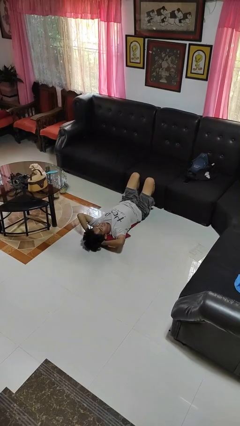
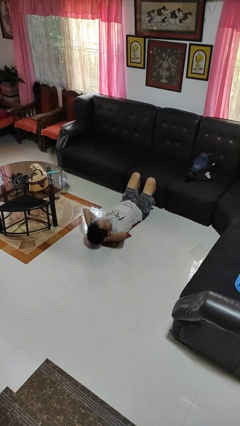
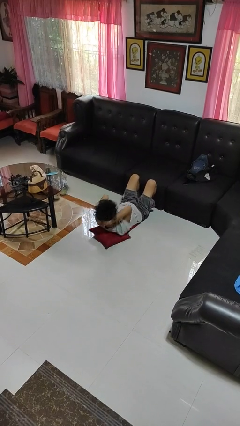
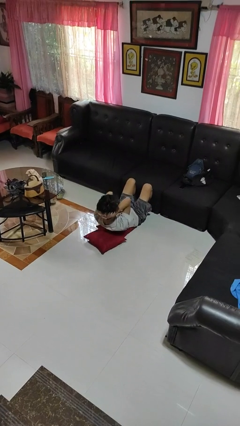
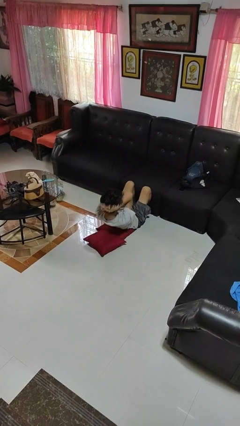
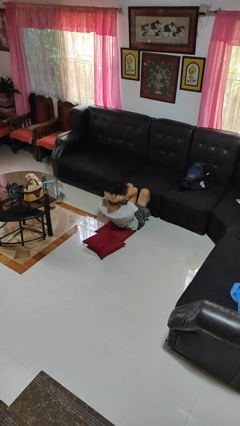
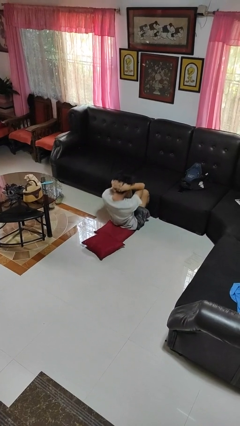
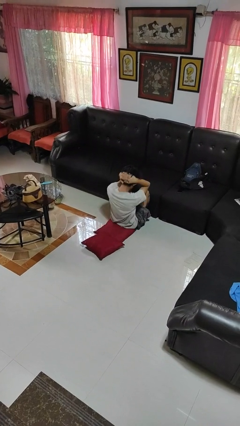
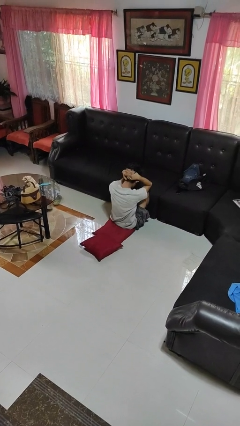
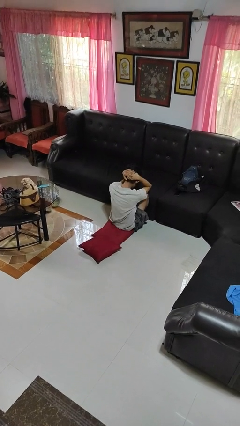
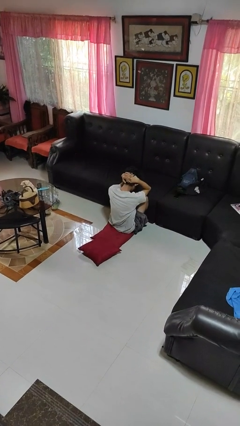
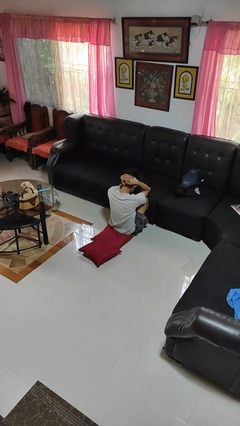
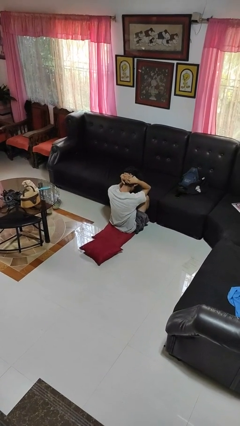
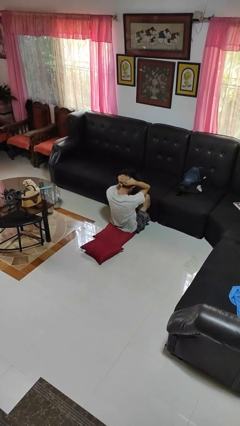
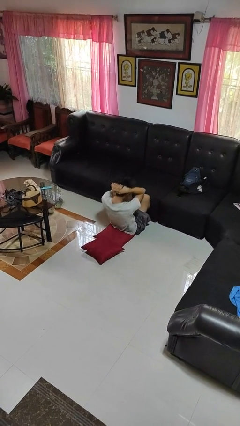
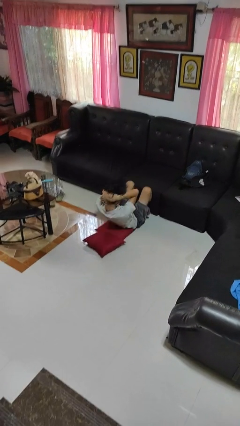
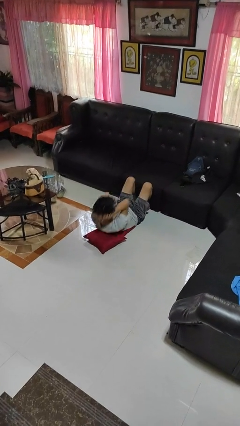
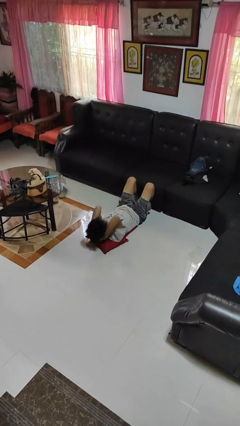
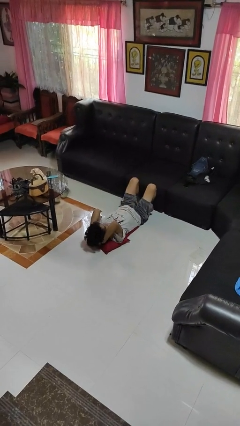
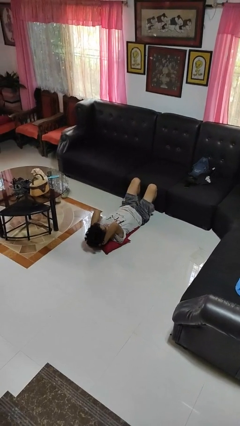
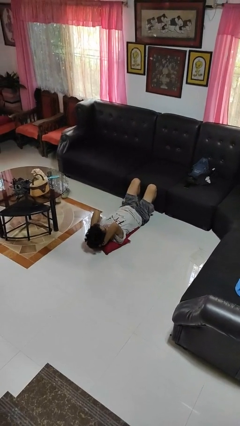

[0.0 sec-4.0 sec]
person exercises with situp

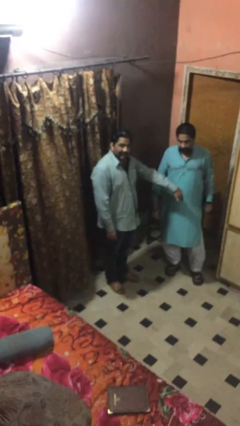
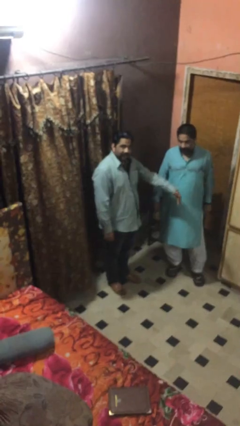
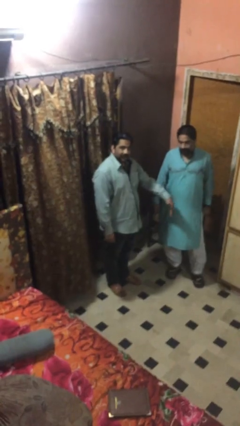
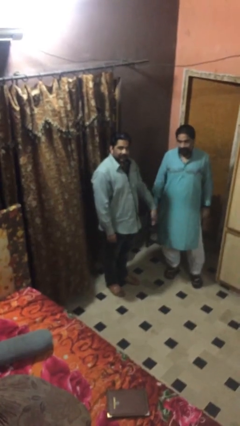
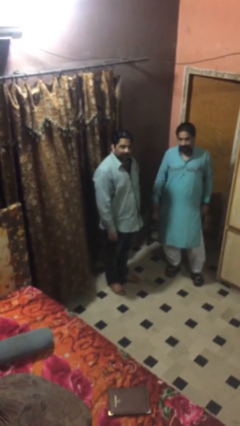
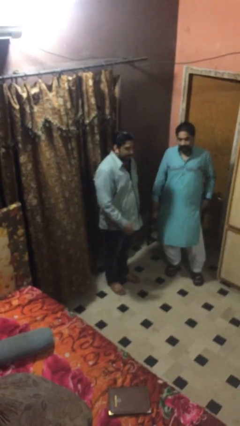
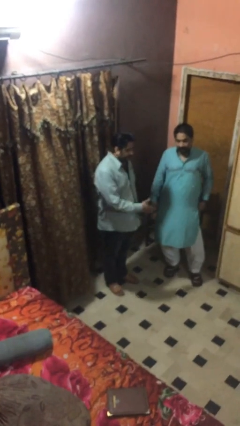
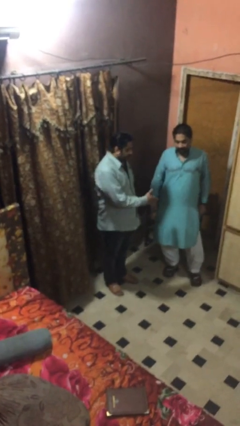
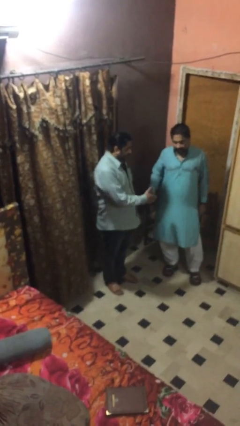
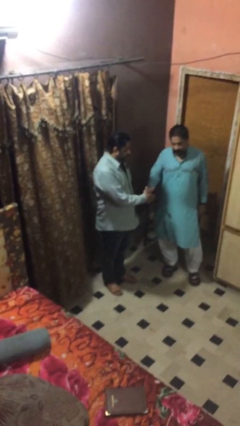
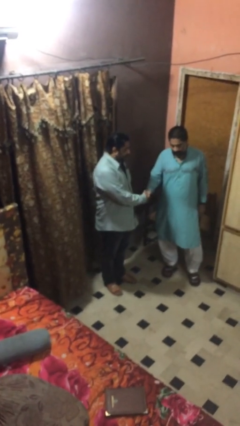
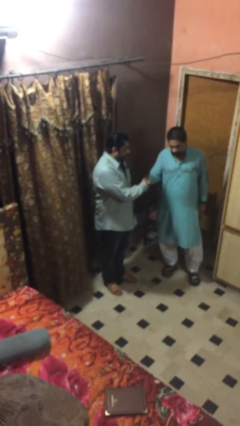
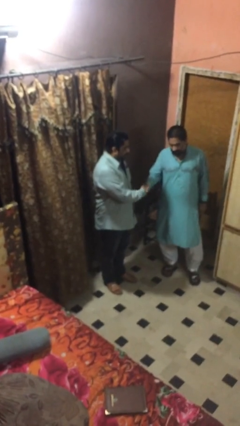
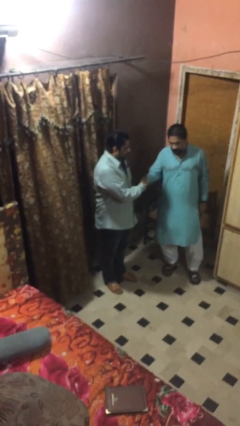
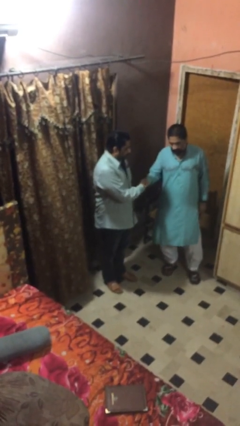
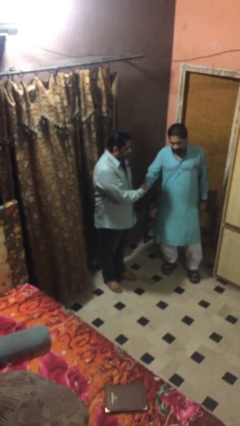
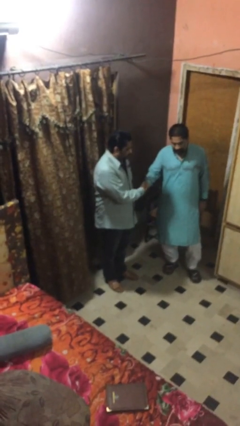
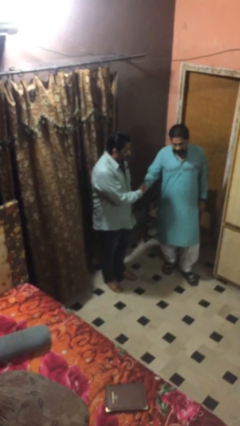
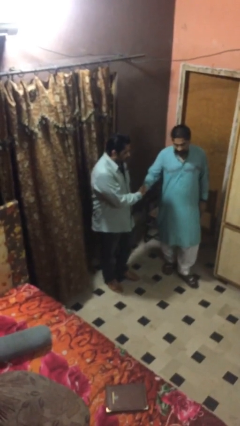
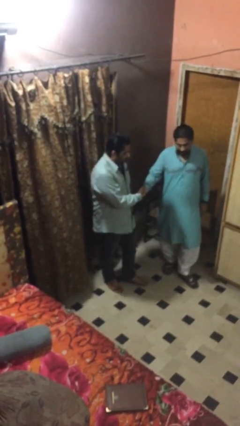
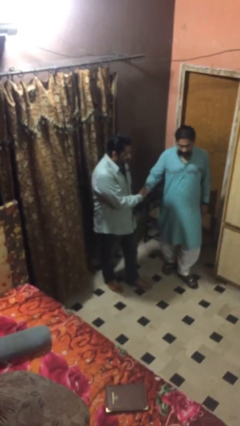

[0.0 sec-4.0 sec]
person shakes hand

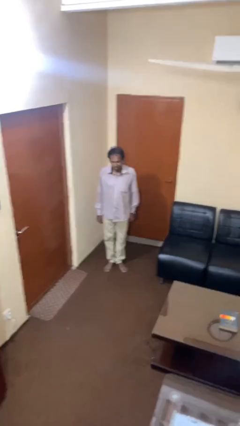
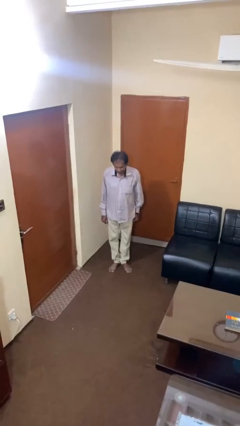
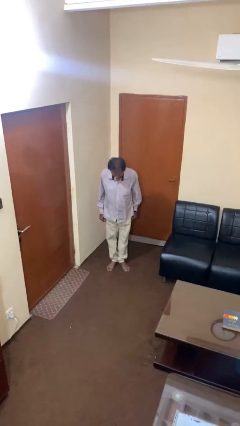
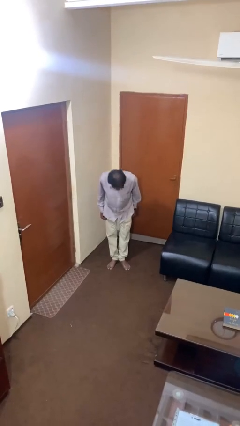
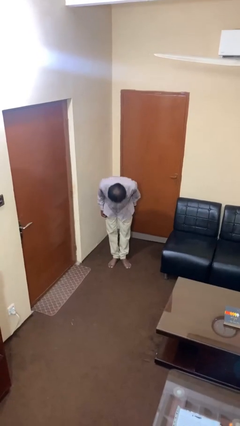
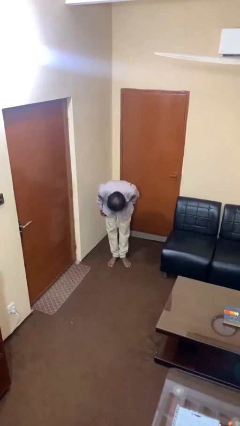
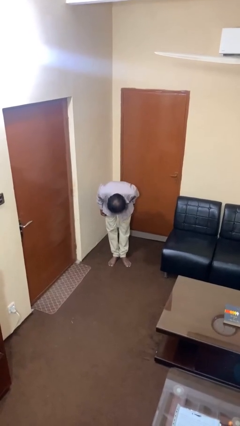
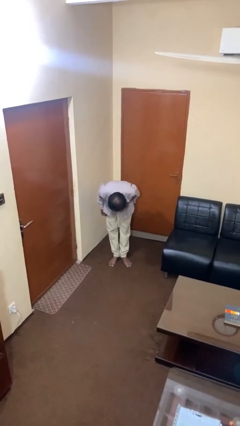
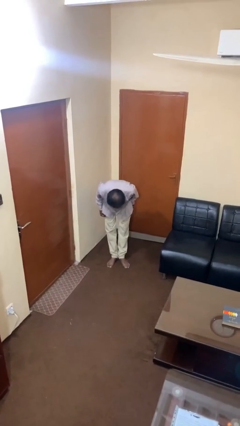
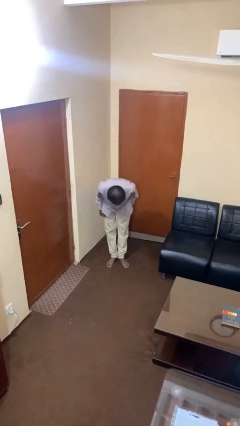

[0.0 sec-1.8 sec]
person bows

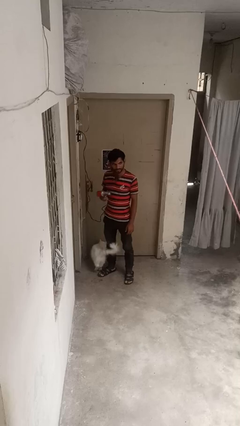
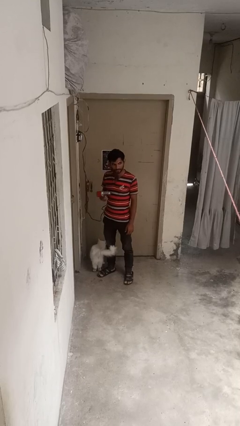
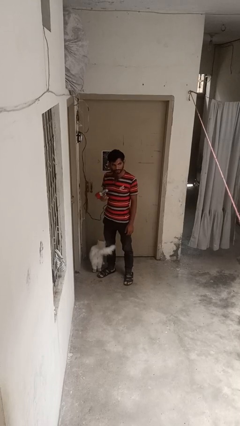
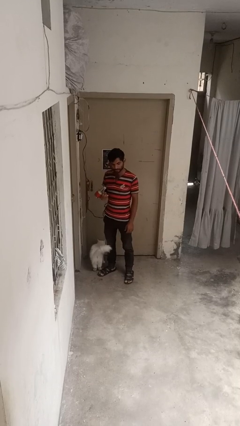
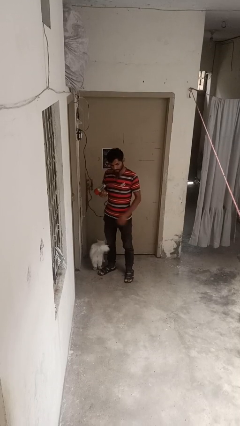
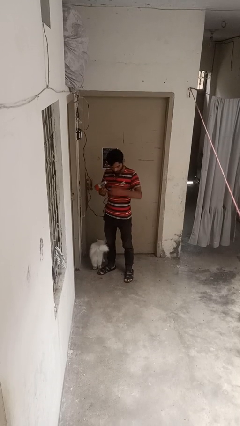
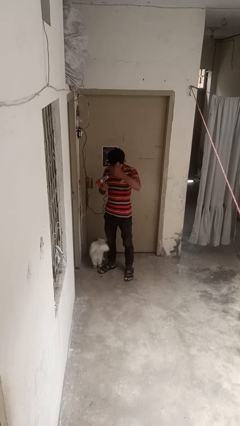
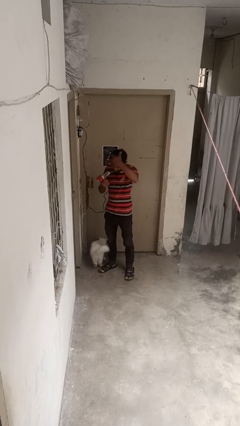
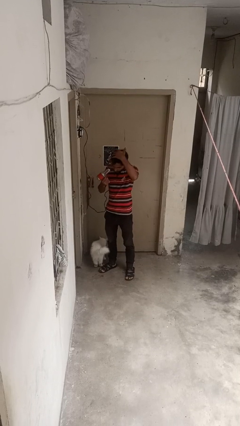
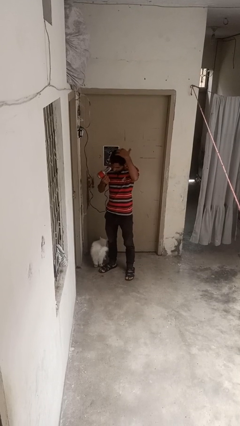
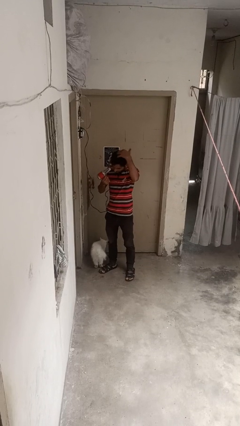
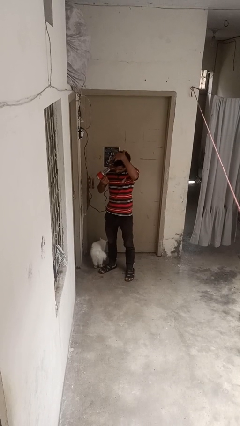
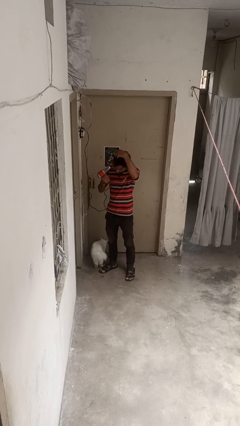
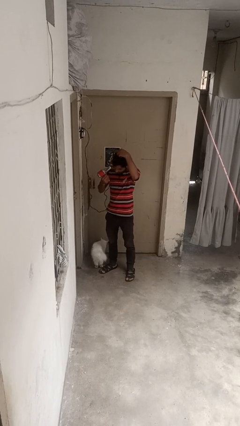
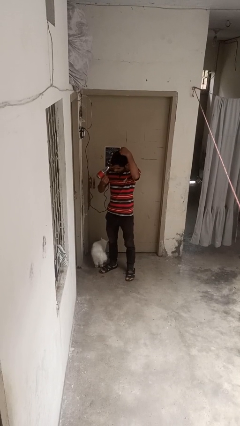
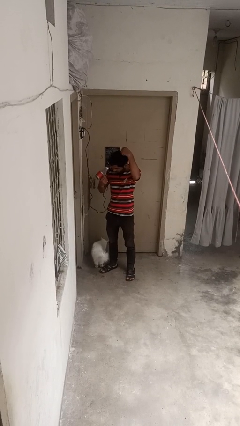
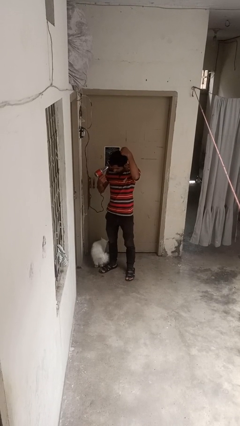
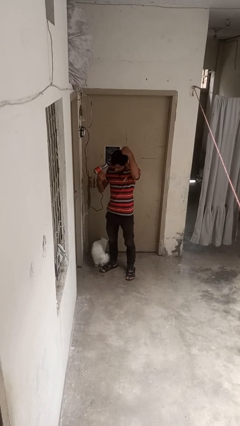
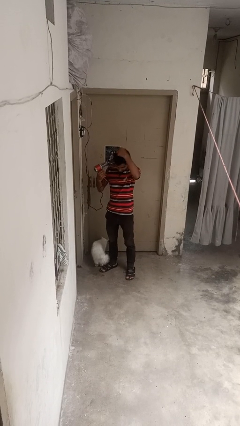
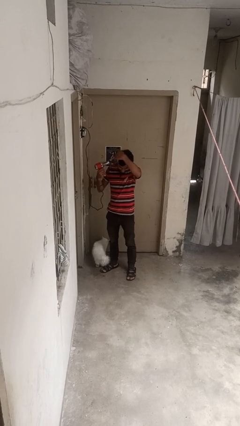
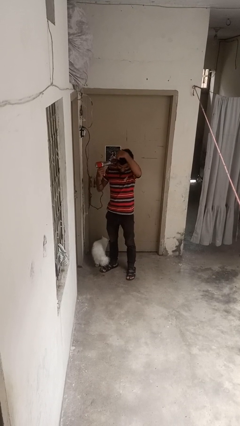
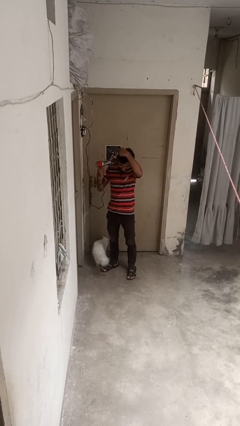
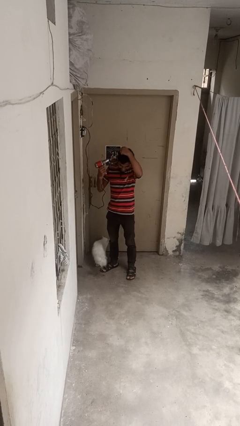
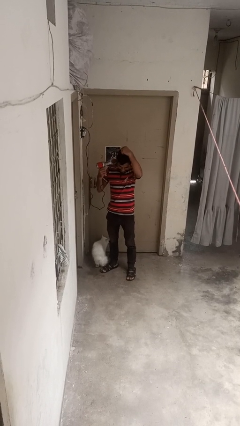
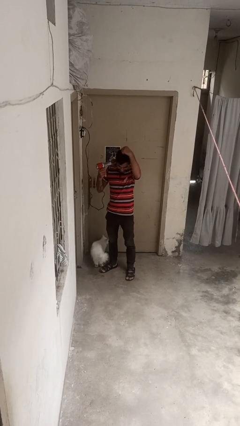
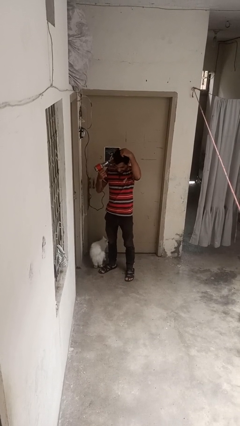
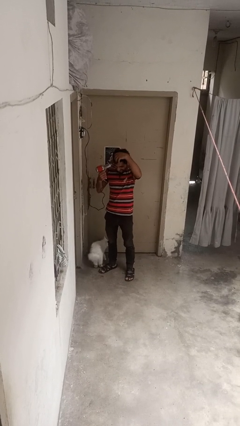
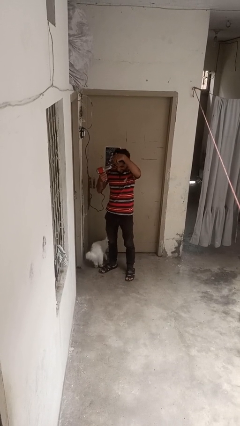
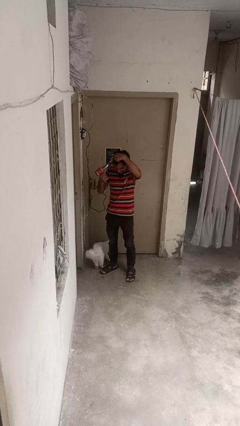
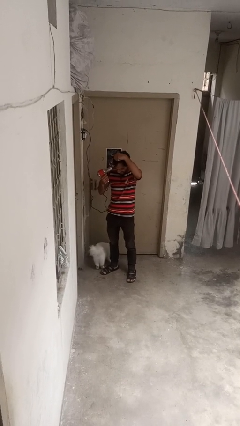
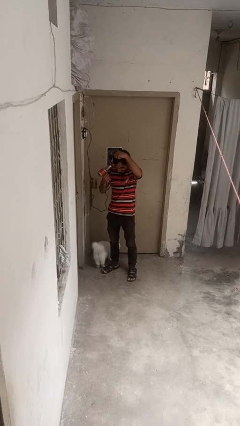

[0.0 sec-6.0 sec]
person dries hair with hairdryer

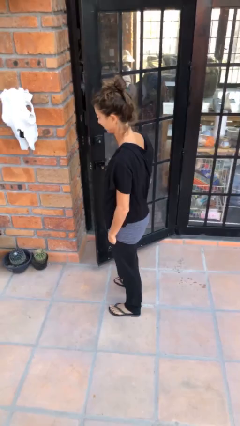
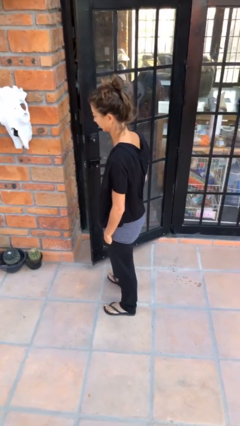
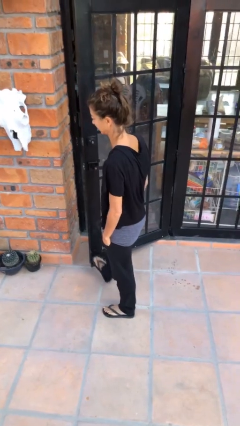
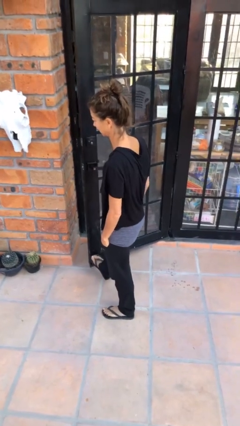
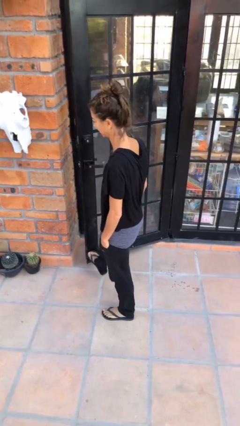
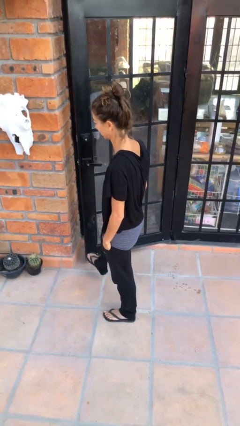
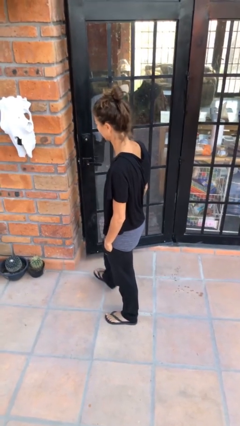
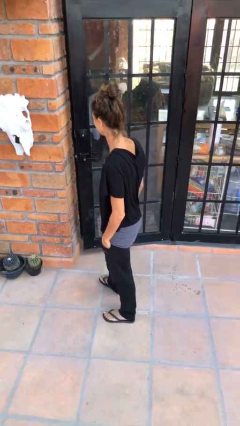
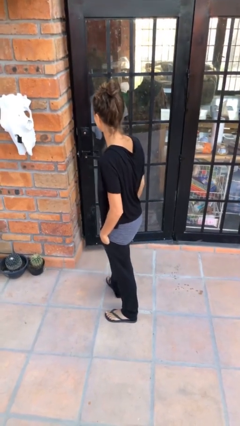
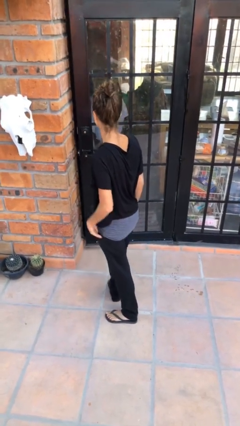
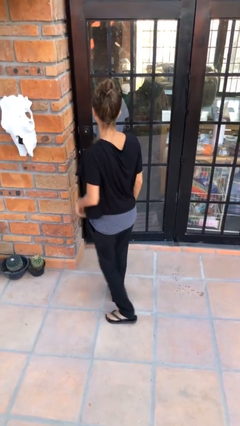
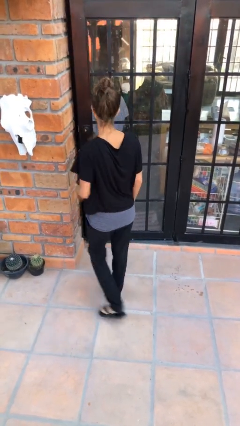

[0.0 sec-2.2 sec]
person closes door with foot
